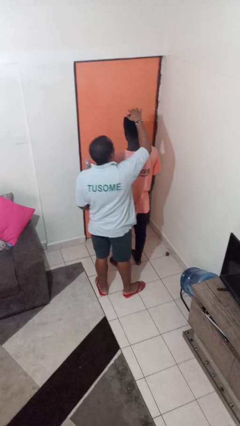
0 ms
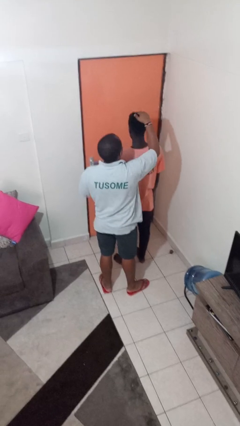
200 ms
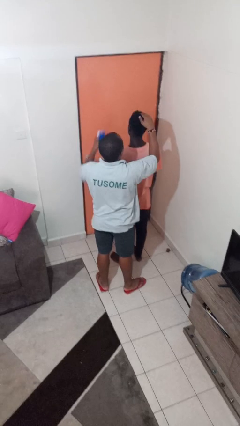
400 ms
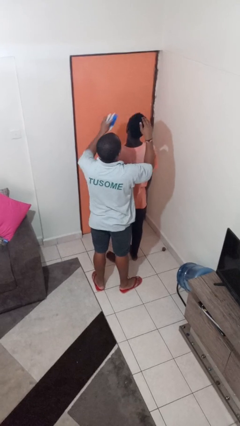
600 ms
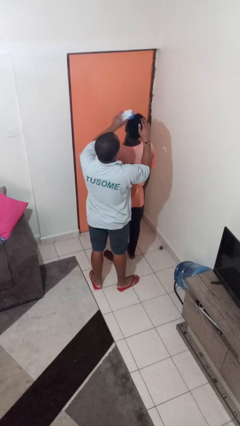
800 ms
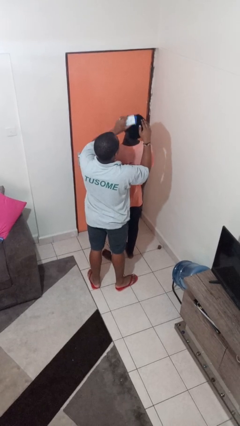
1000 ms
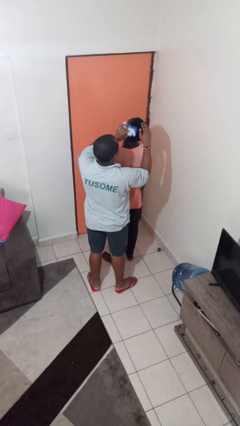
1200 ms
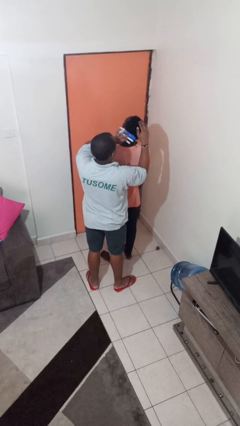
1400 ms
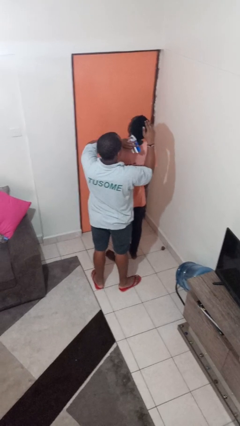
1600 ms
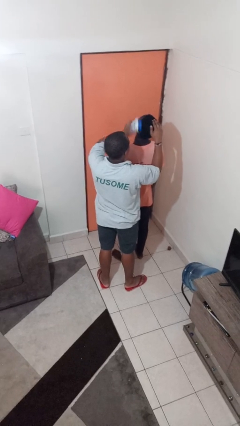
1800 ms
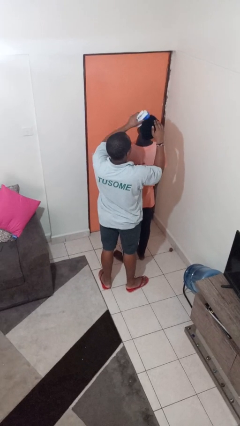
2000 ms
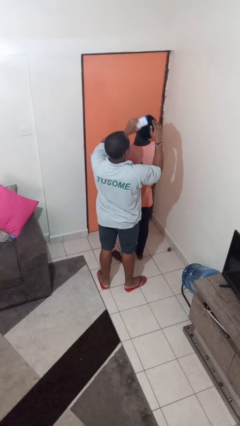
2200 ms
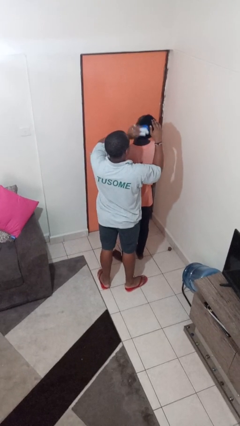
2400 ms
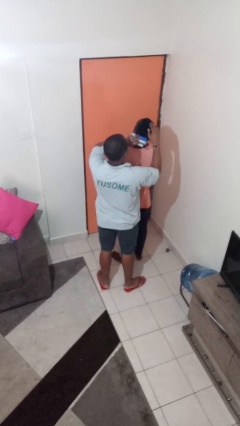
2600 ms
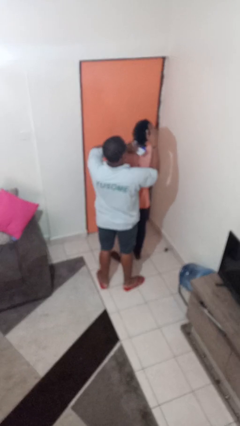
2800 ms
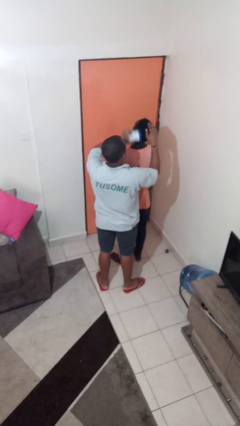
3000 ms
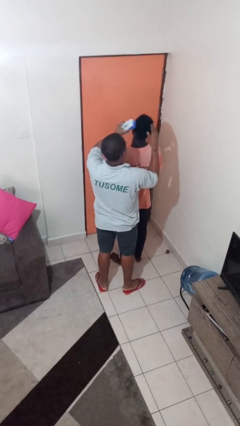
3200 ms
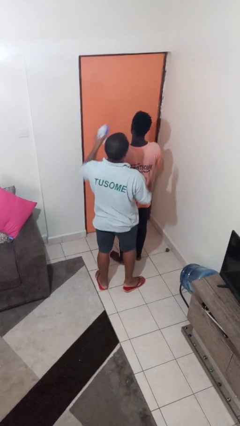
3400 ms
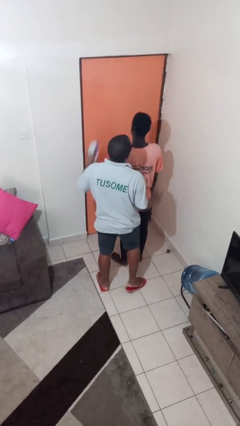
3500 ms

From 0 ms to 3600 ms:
person brushes hair of person

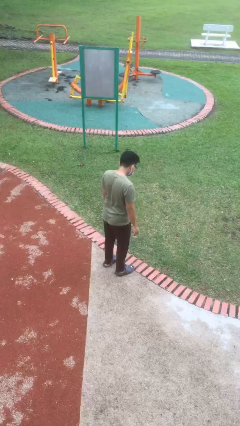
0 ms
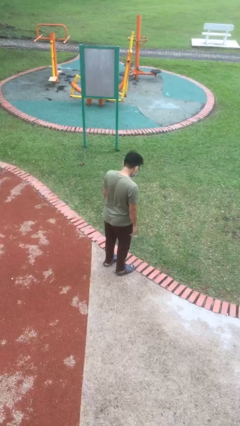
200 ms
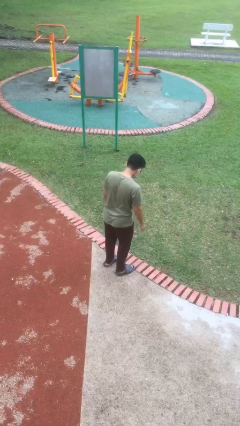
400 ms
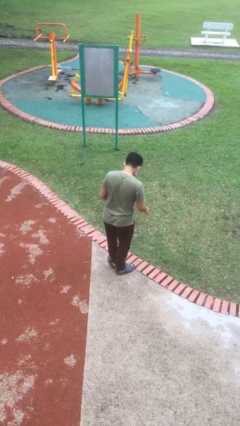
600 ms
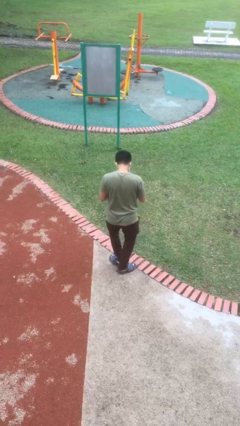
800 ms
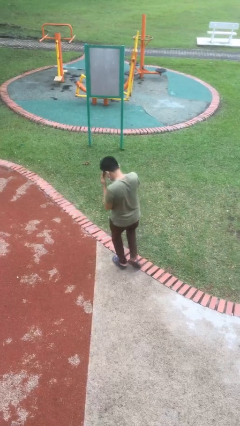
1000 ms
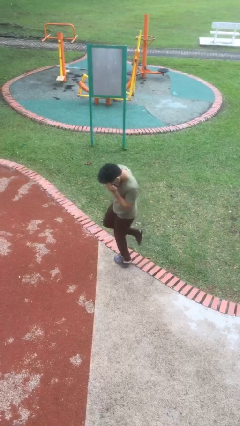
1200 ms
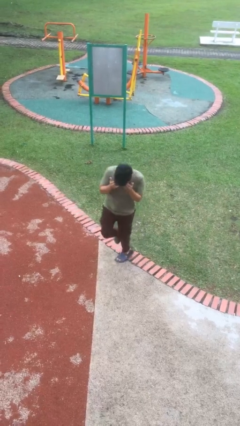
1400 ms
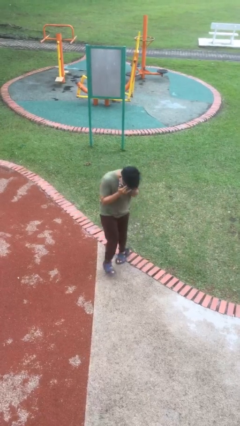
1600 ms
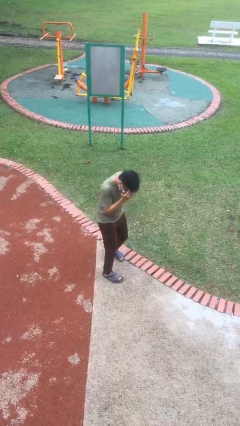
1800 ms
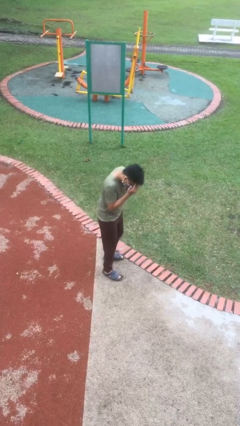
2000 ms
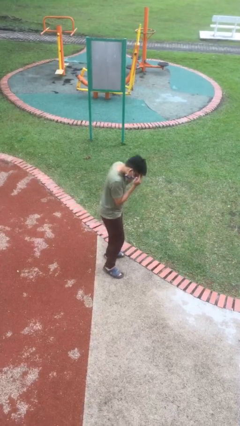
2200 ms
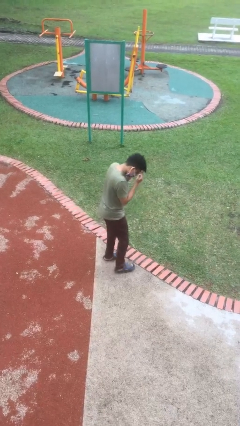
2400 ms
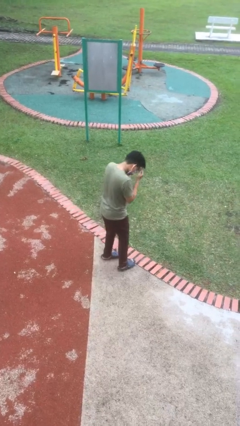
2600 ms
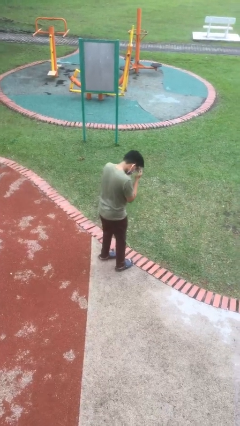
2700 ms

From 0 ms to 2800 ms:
person twirls

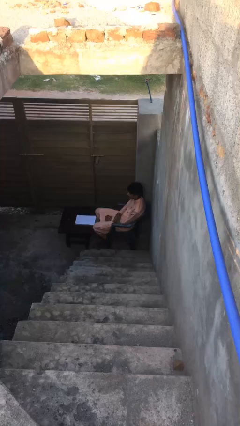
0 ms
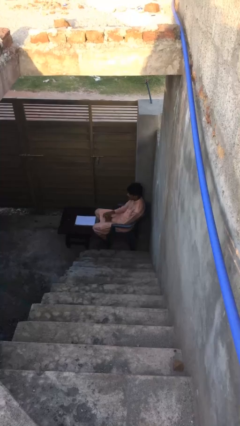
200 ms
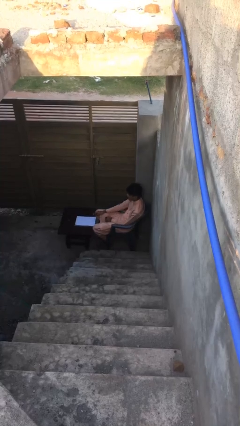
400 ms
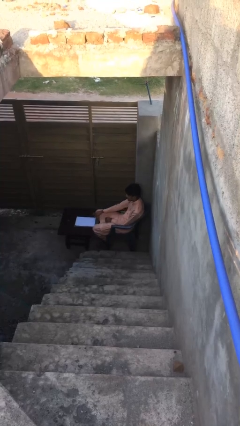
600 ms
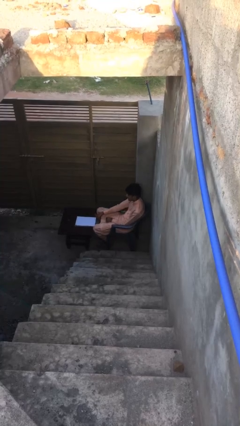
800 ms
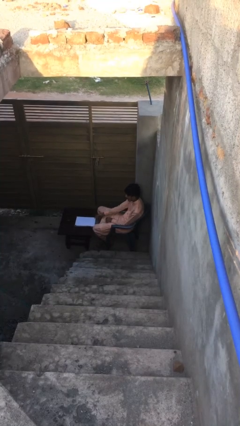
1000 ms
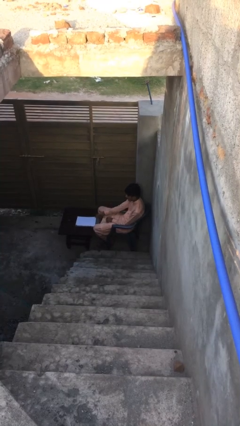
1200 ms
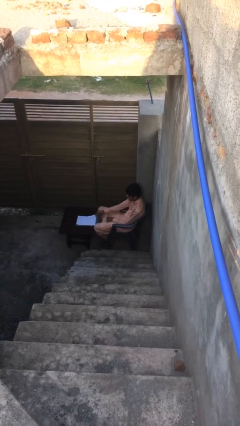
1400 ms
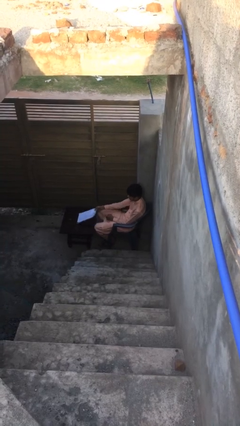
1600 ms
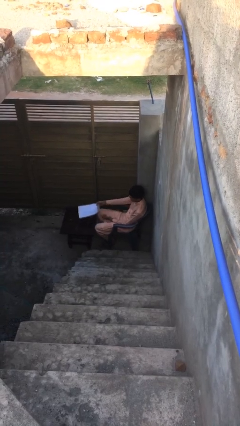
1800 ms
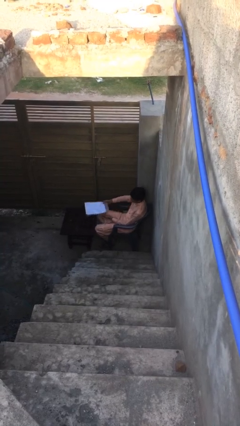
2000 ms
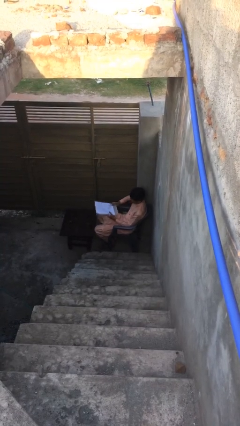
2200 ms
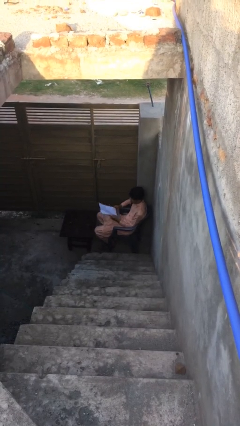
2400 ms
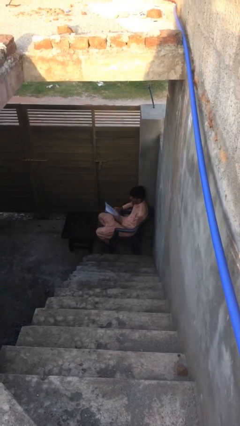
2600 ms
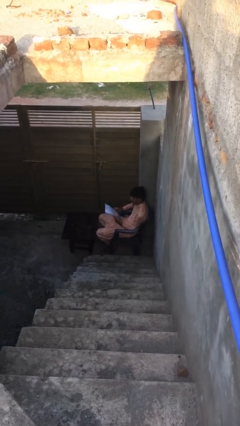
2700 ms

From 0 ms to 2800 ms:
person picks up object from table

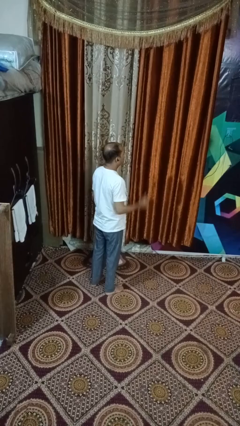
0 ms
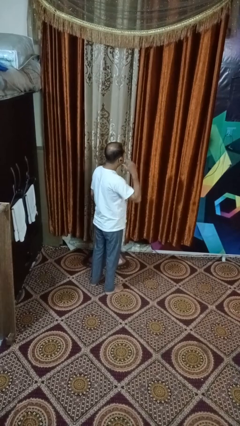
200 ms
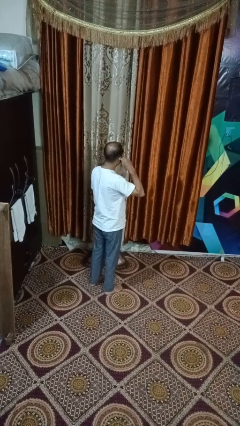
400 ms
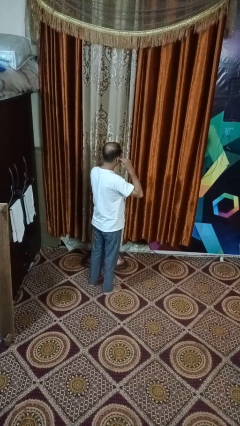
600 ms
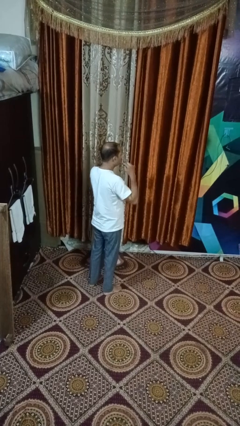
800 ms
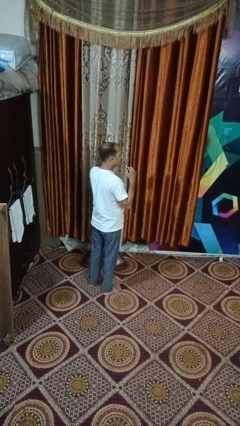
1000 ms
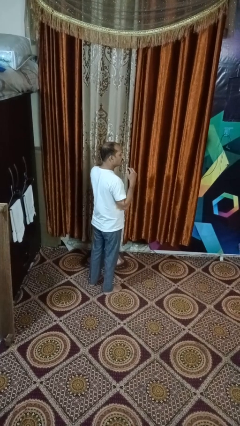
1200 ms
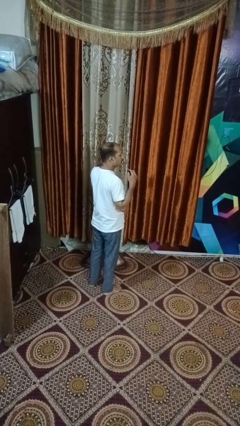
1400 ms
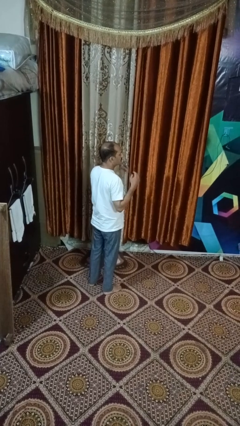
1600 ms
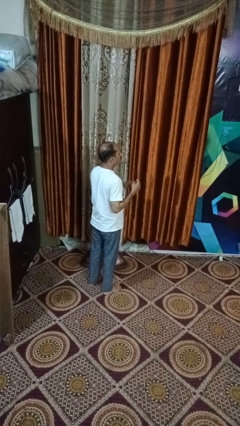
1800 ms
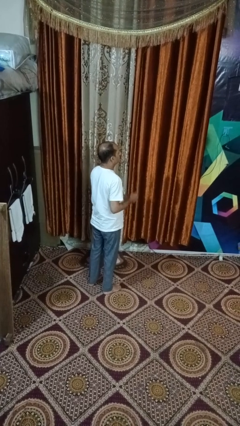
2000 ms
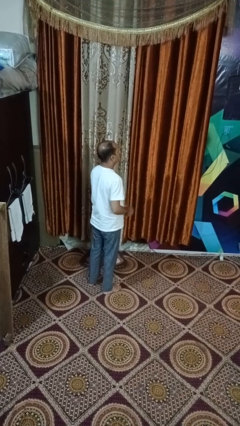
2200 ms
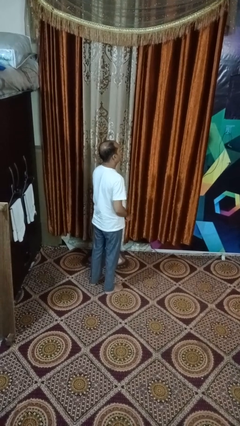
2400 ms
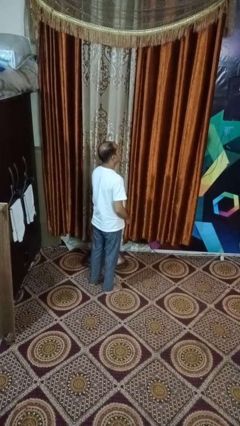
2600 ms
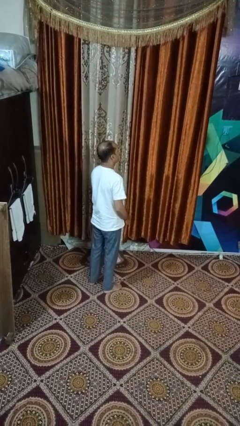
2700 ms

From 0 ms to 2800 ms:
person takes off headphones

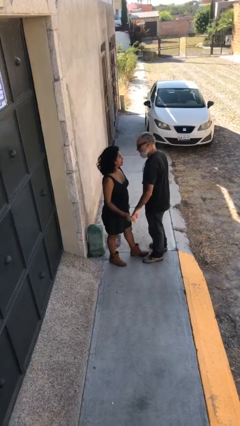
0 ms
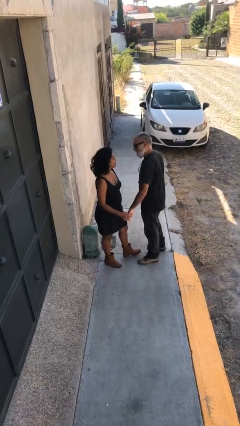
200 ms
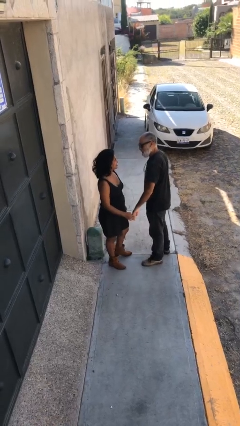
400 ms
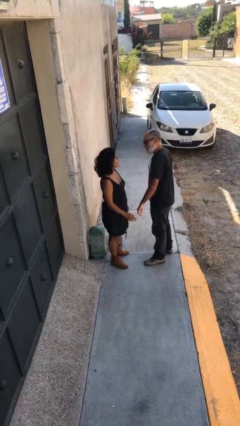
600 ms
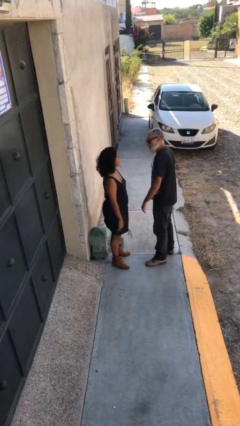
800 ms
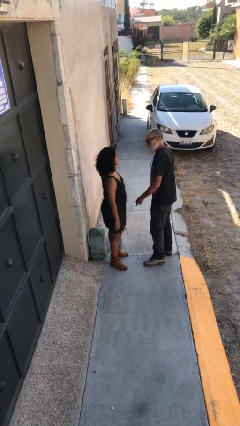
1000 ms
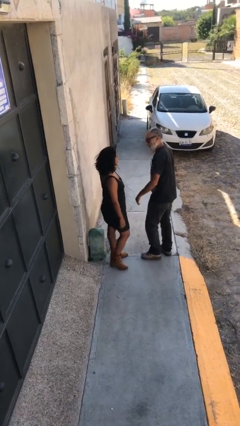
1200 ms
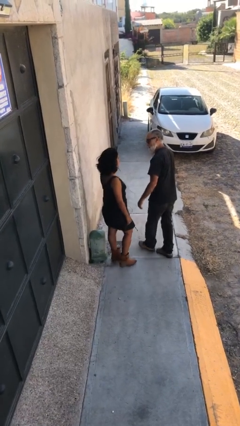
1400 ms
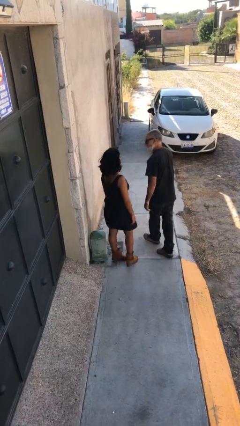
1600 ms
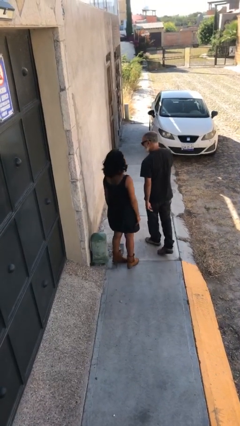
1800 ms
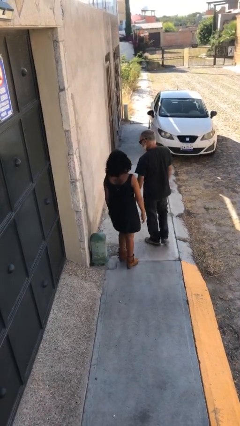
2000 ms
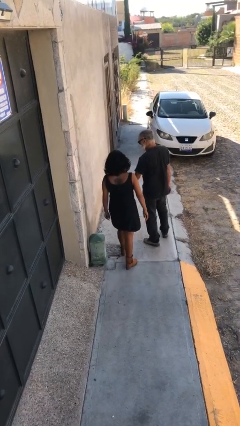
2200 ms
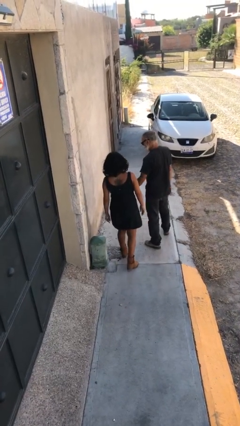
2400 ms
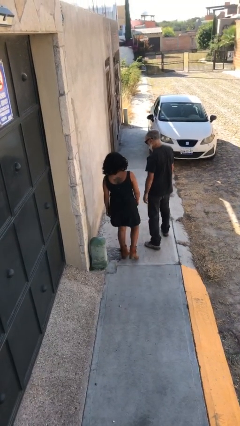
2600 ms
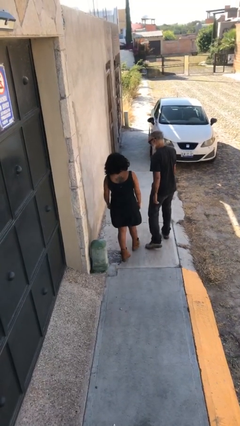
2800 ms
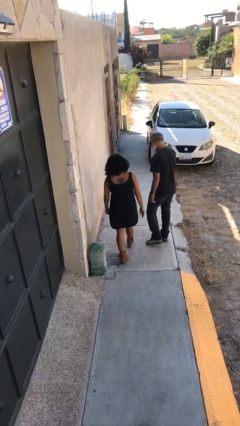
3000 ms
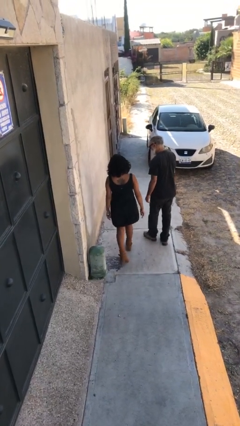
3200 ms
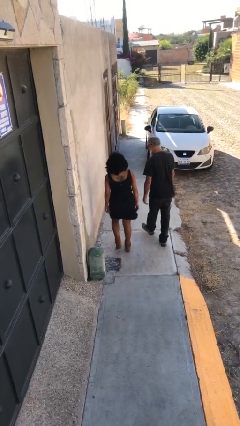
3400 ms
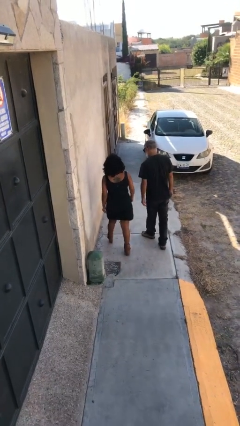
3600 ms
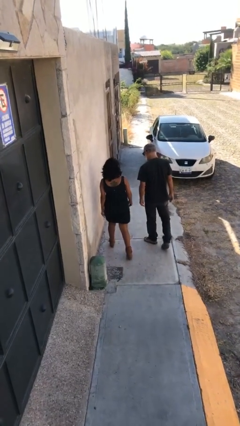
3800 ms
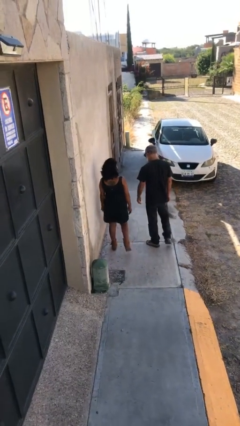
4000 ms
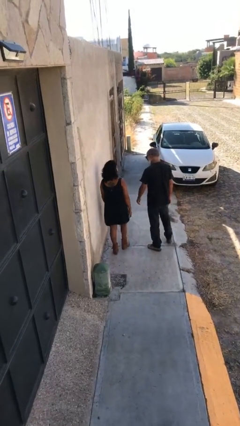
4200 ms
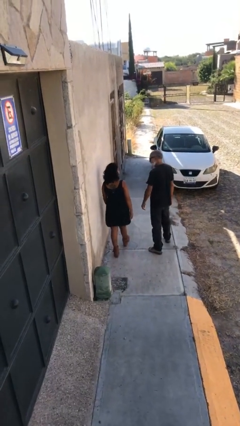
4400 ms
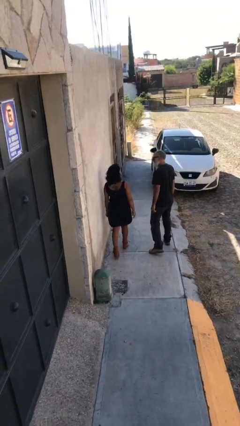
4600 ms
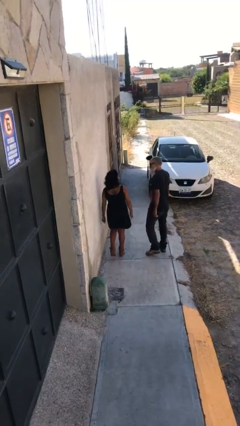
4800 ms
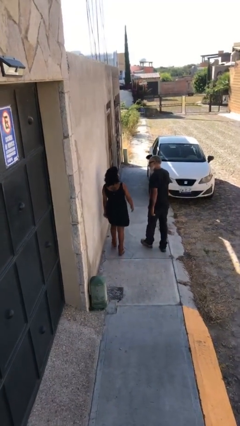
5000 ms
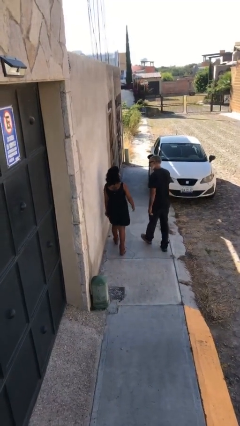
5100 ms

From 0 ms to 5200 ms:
person talks to person

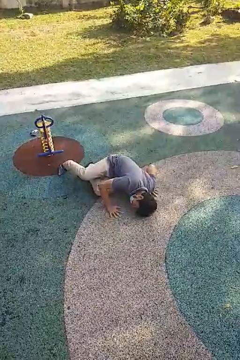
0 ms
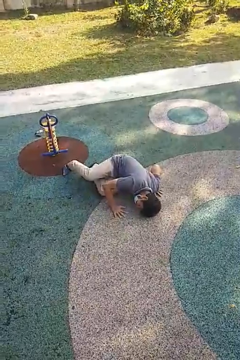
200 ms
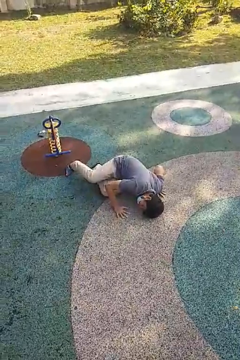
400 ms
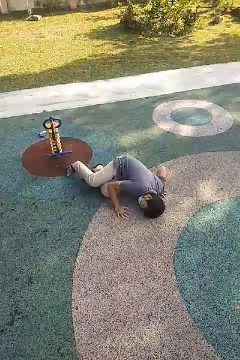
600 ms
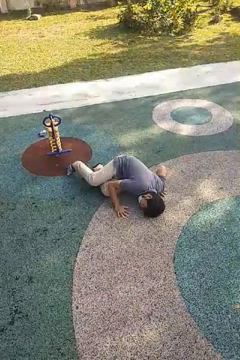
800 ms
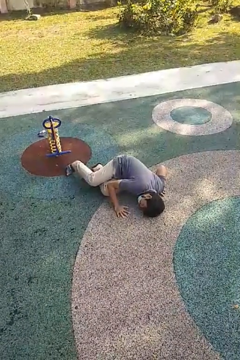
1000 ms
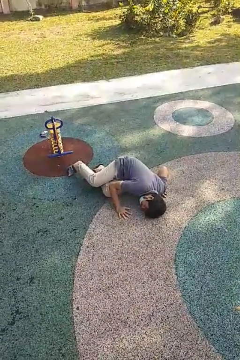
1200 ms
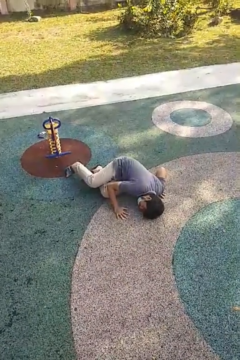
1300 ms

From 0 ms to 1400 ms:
person lies down on floor
